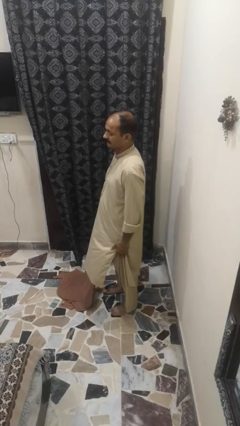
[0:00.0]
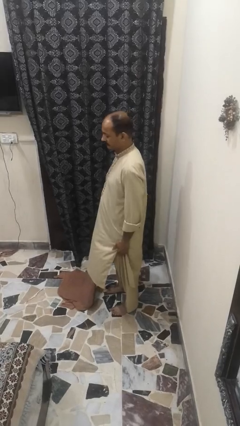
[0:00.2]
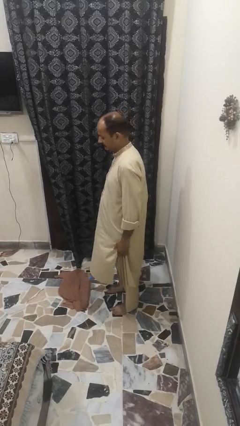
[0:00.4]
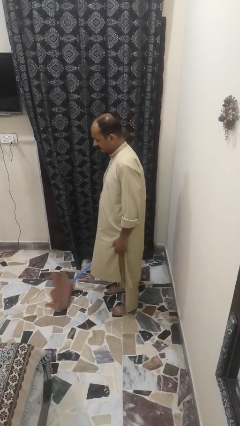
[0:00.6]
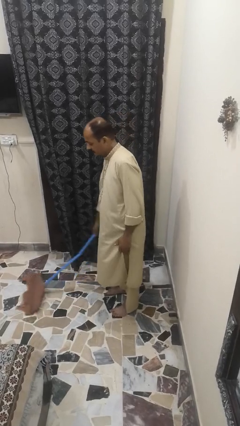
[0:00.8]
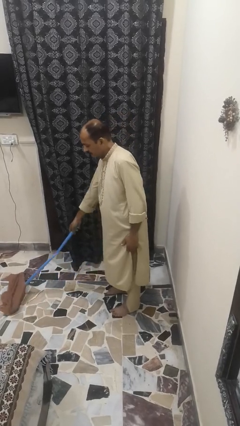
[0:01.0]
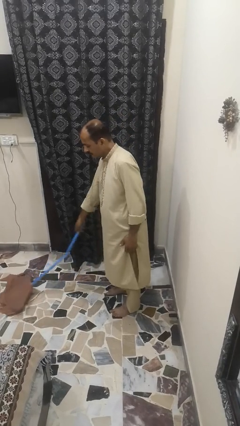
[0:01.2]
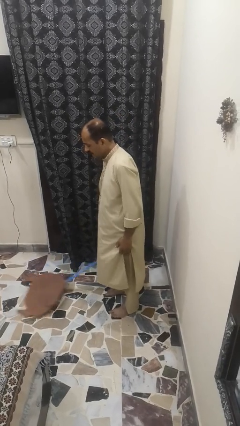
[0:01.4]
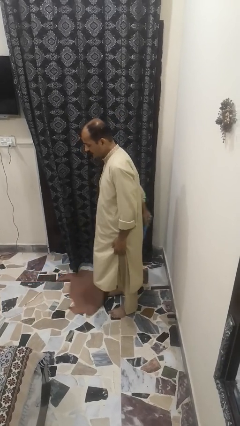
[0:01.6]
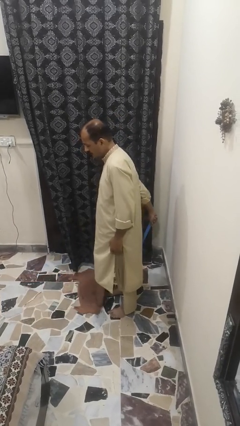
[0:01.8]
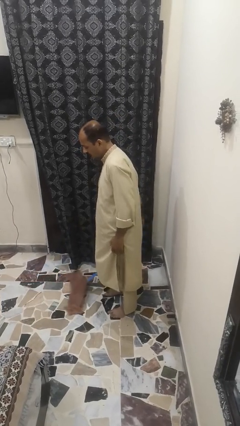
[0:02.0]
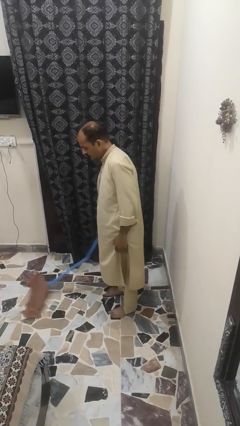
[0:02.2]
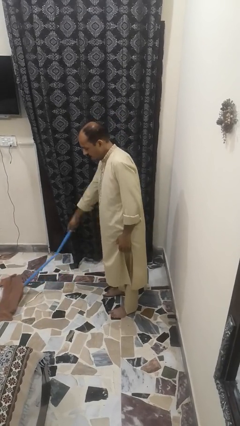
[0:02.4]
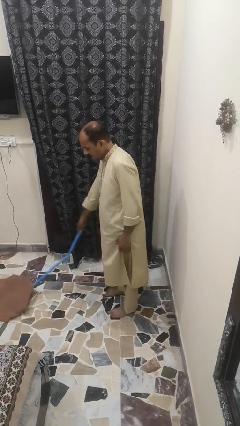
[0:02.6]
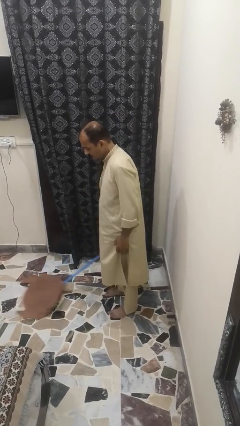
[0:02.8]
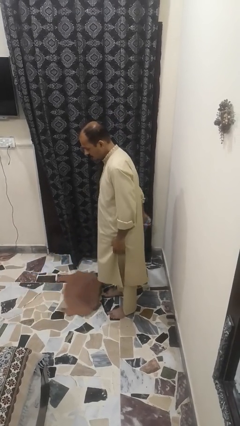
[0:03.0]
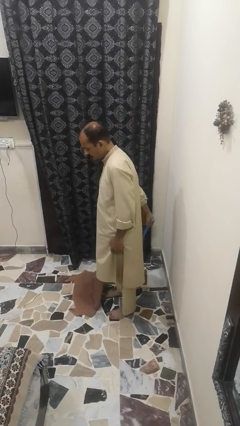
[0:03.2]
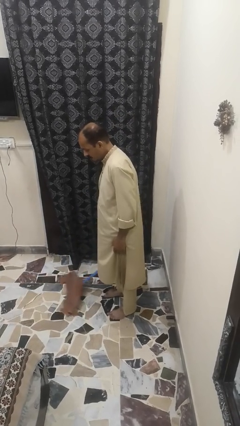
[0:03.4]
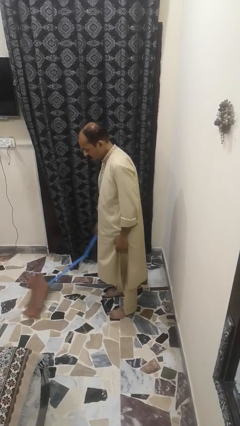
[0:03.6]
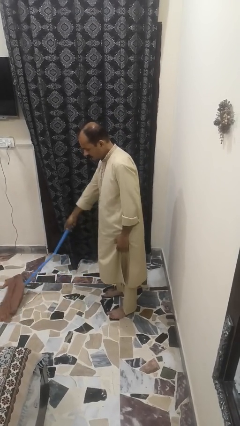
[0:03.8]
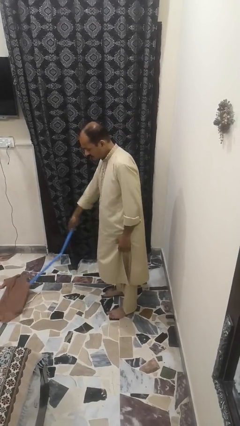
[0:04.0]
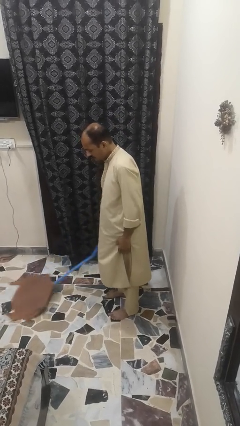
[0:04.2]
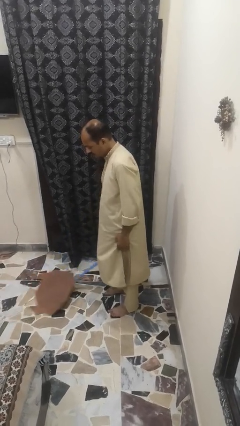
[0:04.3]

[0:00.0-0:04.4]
person mops

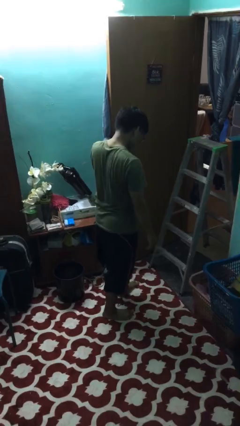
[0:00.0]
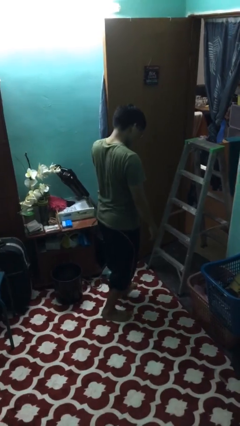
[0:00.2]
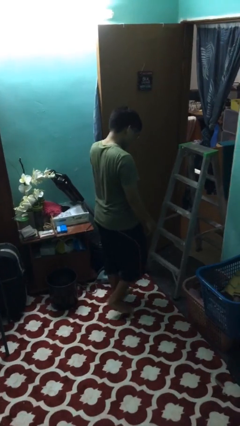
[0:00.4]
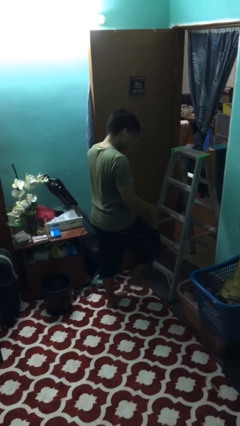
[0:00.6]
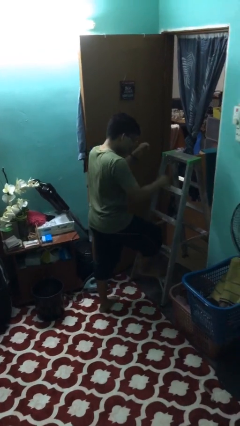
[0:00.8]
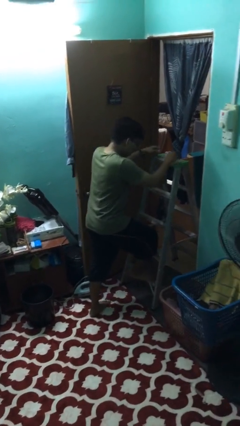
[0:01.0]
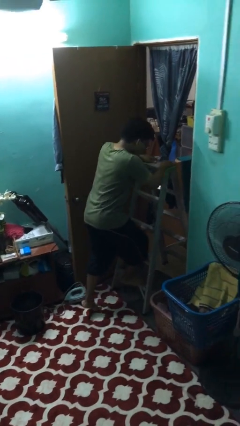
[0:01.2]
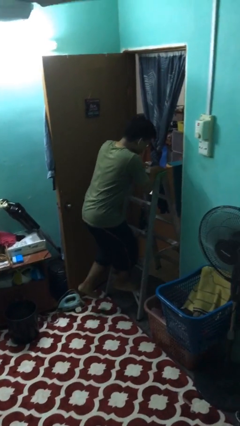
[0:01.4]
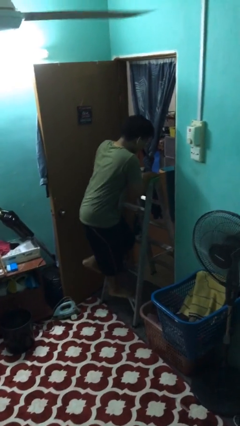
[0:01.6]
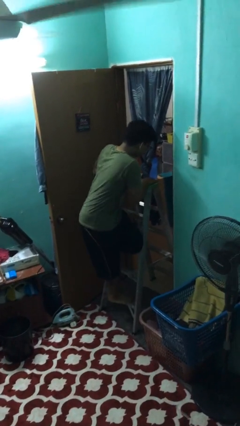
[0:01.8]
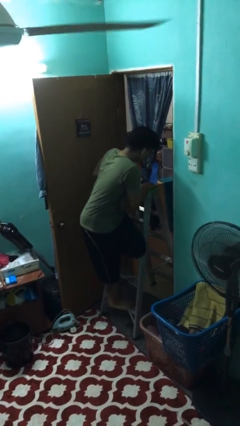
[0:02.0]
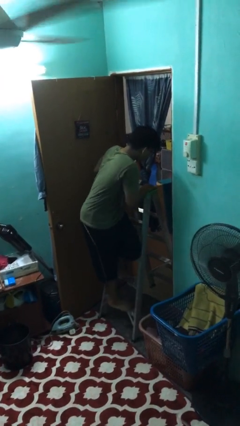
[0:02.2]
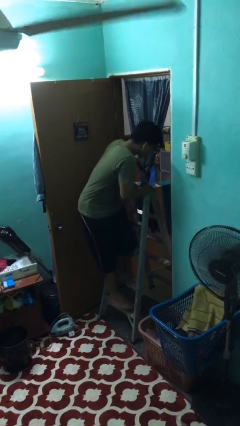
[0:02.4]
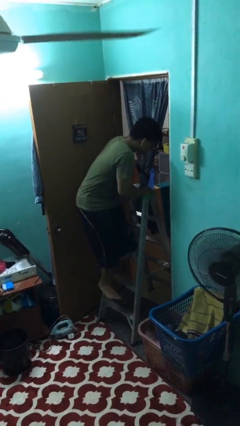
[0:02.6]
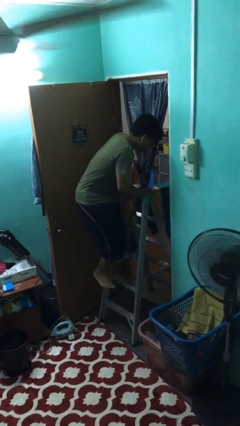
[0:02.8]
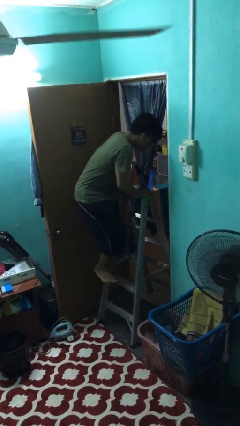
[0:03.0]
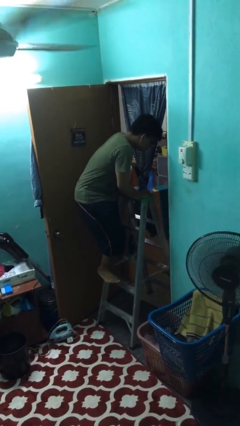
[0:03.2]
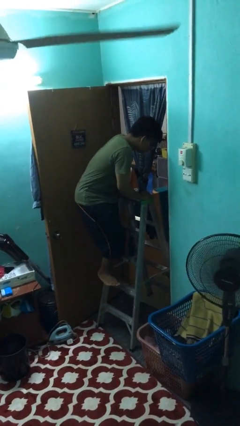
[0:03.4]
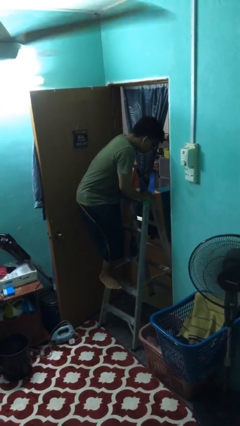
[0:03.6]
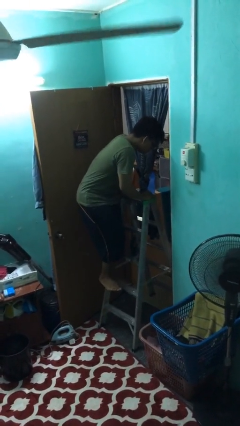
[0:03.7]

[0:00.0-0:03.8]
person climbs up ladder

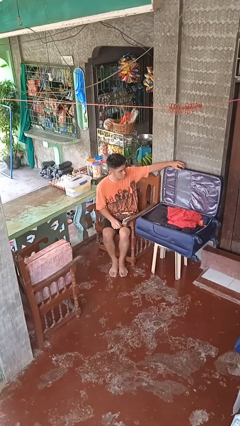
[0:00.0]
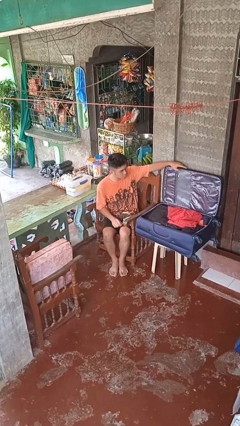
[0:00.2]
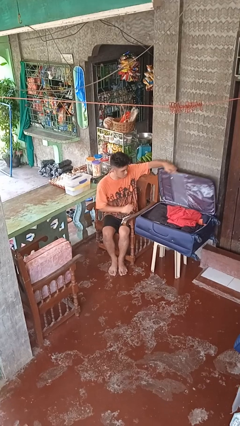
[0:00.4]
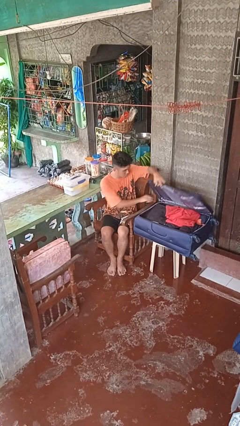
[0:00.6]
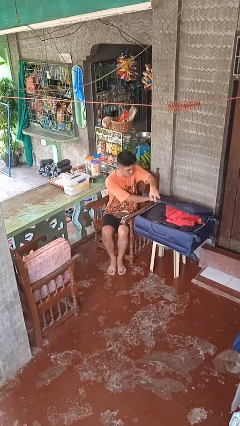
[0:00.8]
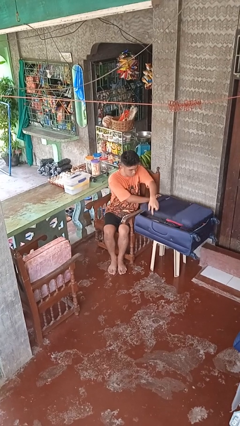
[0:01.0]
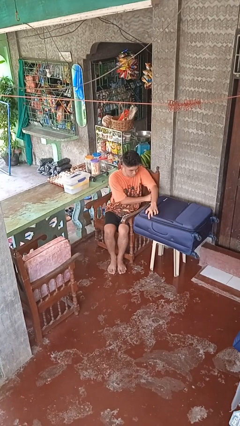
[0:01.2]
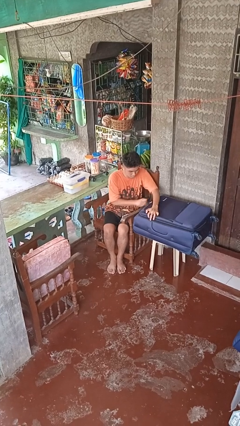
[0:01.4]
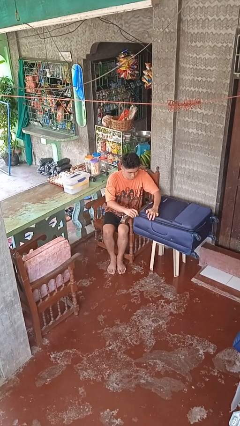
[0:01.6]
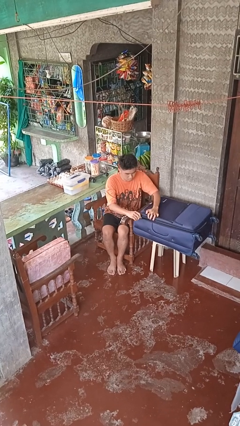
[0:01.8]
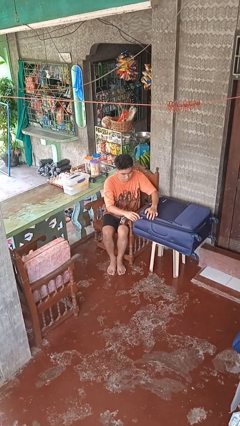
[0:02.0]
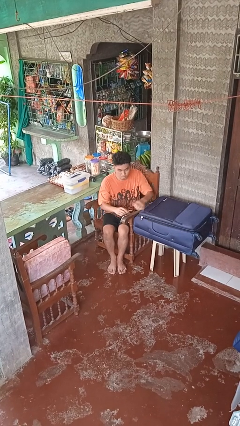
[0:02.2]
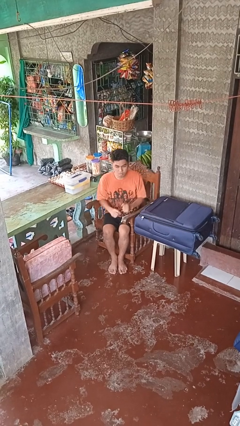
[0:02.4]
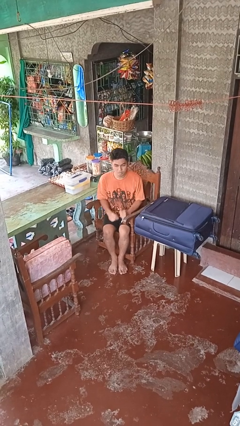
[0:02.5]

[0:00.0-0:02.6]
person closes suitcase

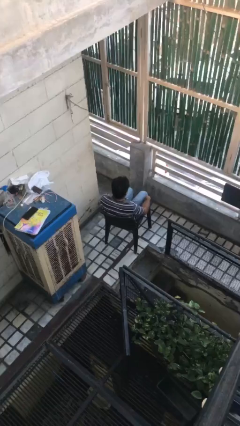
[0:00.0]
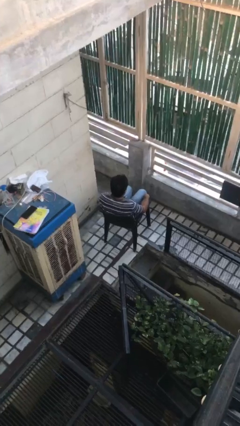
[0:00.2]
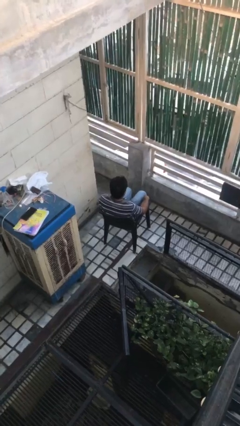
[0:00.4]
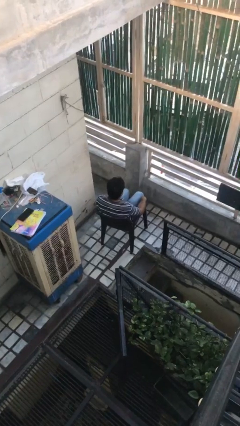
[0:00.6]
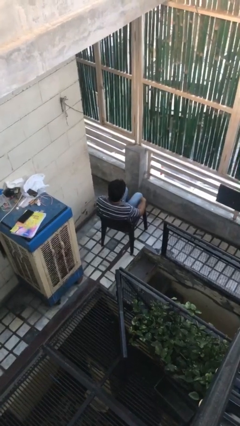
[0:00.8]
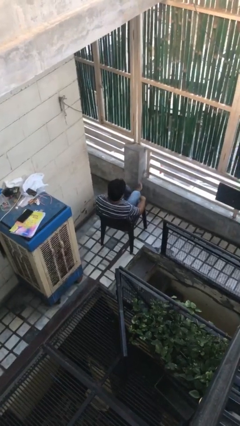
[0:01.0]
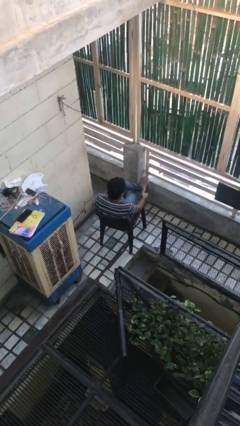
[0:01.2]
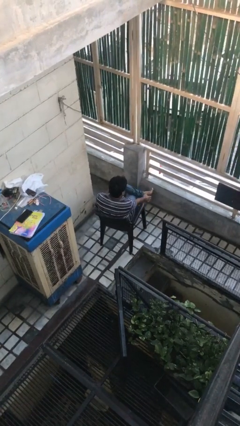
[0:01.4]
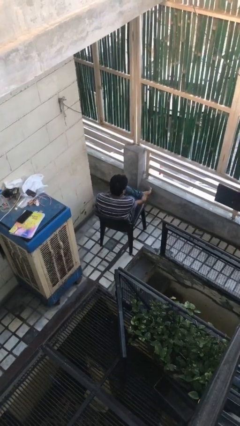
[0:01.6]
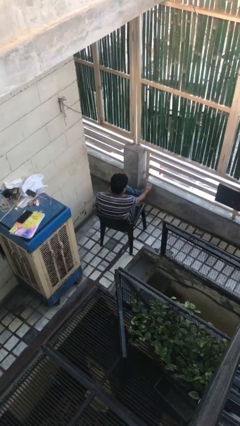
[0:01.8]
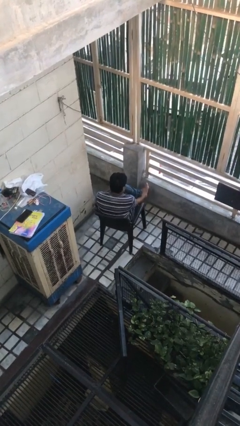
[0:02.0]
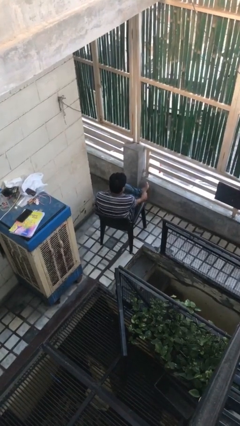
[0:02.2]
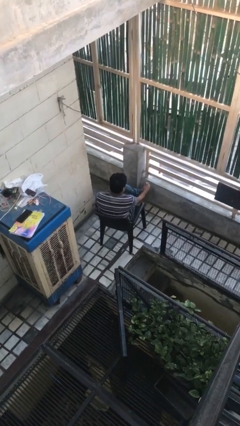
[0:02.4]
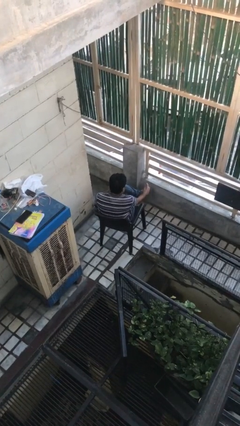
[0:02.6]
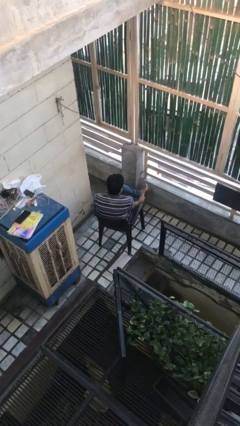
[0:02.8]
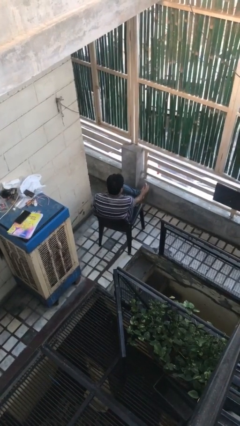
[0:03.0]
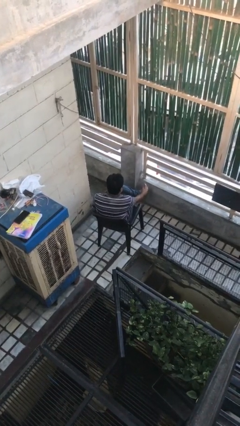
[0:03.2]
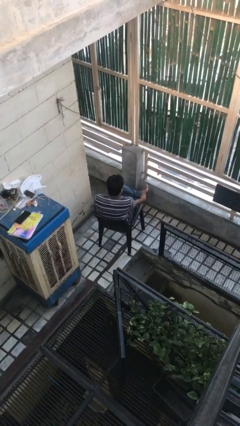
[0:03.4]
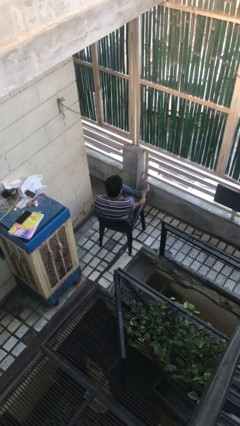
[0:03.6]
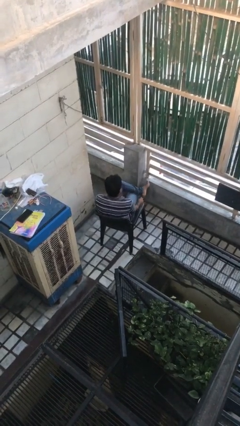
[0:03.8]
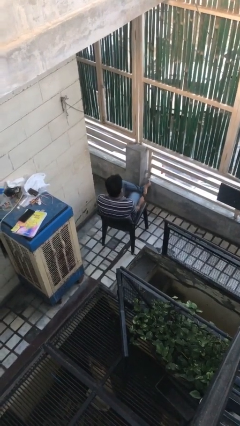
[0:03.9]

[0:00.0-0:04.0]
person rubs foot

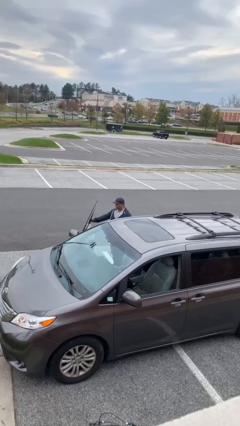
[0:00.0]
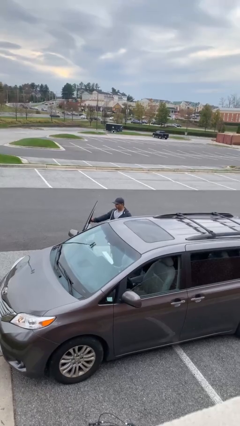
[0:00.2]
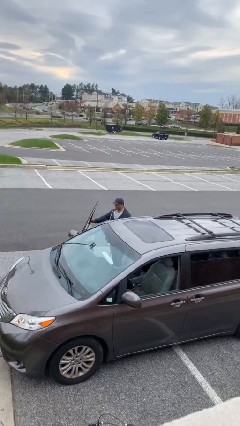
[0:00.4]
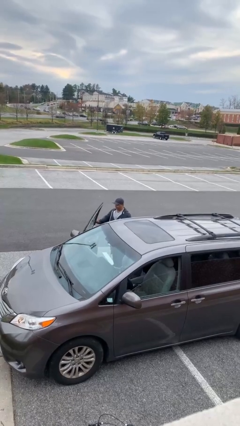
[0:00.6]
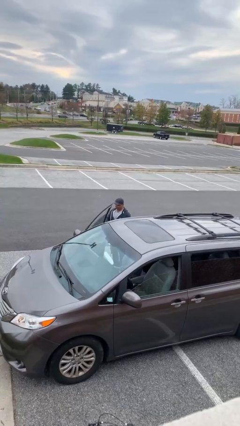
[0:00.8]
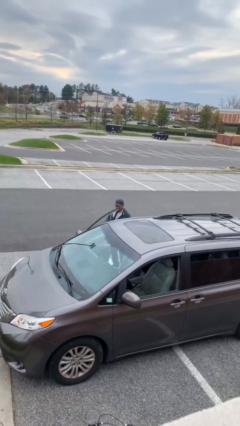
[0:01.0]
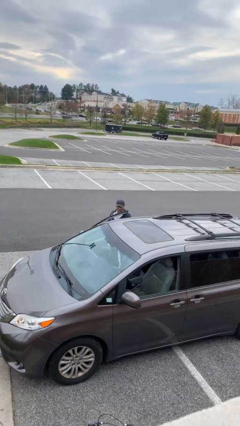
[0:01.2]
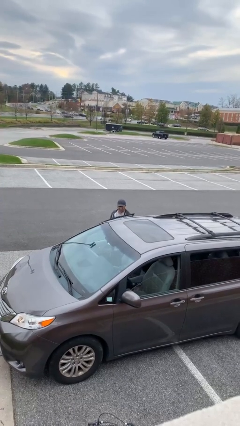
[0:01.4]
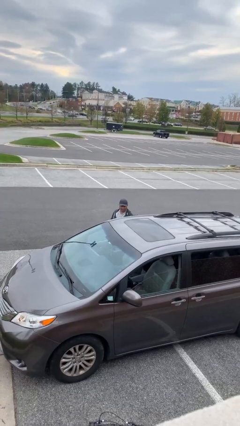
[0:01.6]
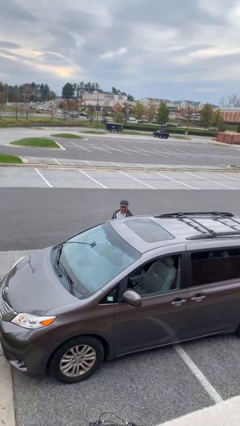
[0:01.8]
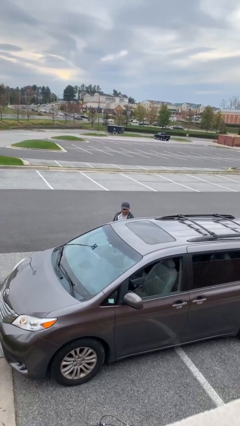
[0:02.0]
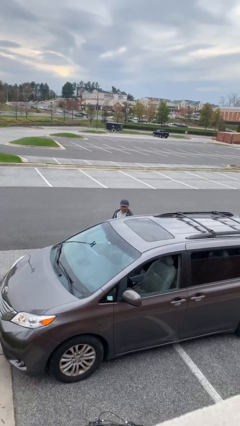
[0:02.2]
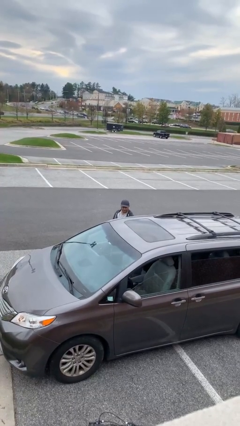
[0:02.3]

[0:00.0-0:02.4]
person closes car door
